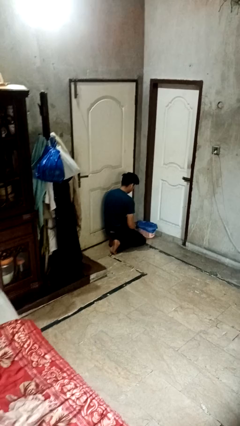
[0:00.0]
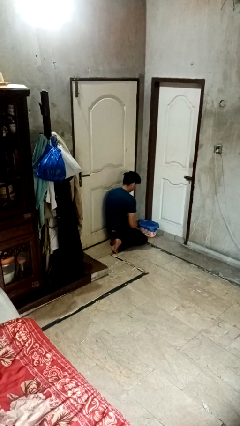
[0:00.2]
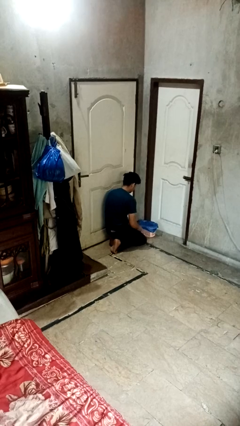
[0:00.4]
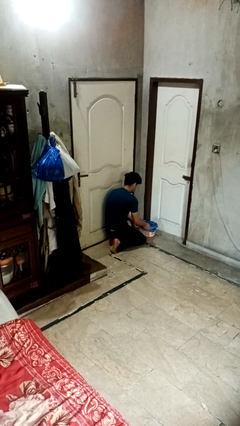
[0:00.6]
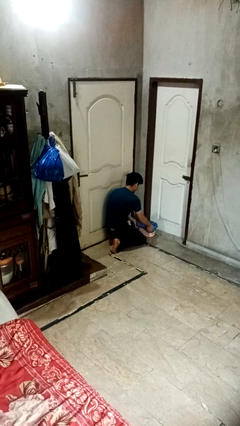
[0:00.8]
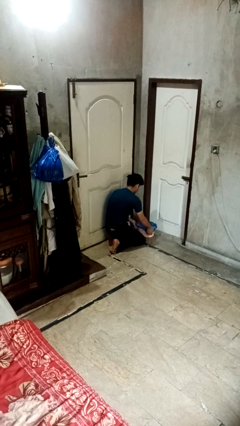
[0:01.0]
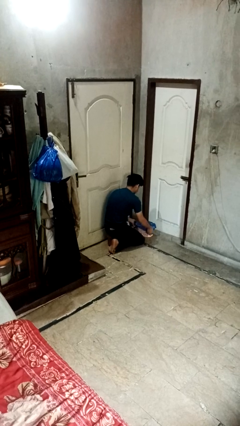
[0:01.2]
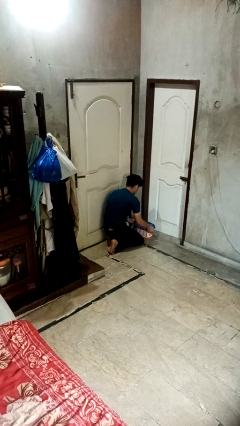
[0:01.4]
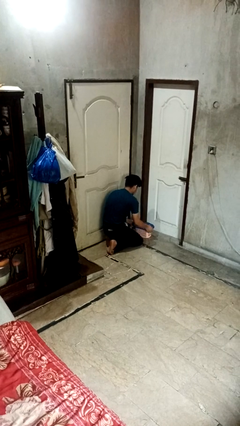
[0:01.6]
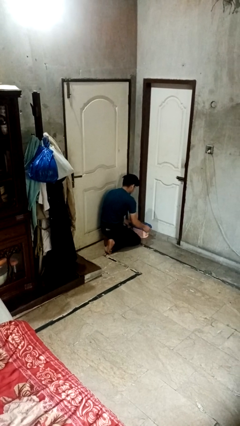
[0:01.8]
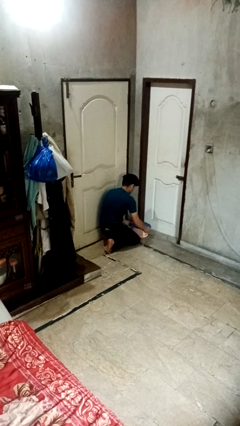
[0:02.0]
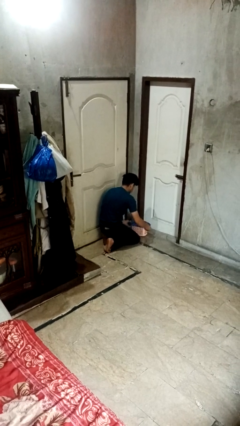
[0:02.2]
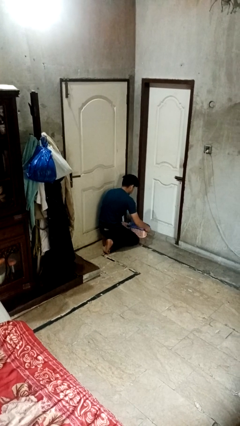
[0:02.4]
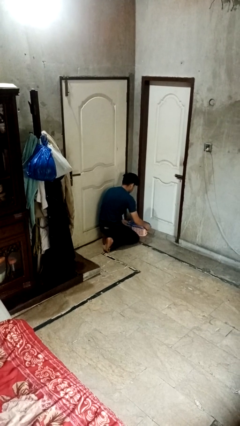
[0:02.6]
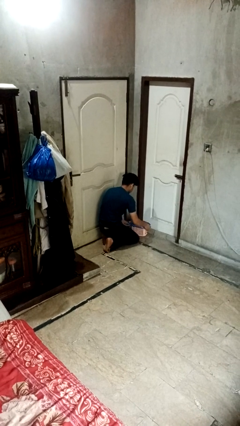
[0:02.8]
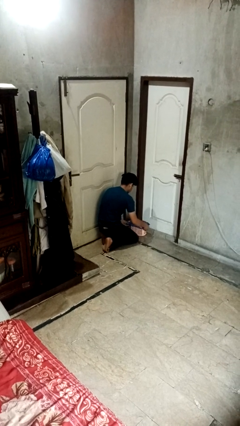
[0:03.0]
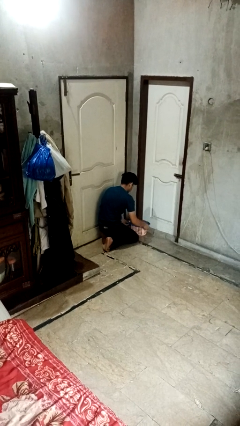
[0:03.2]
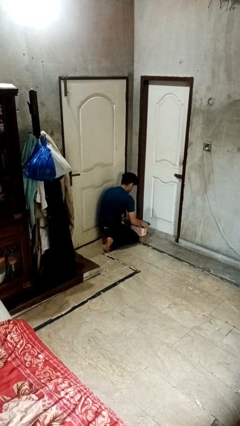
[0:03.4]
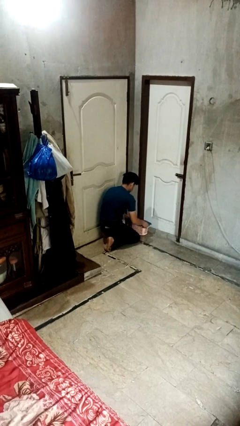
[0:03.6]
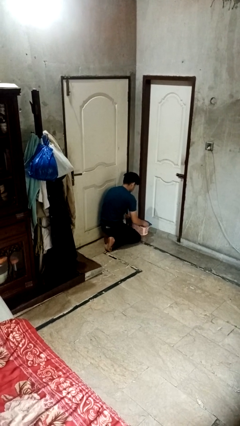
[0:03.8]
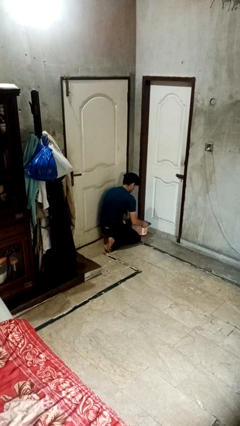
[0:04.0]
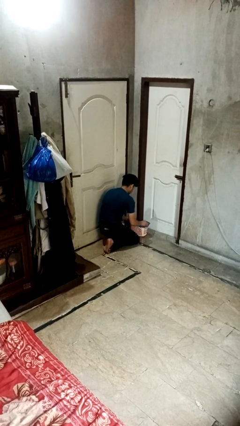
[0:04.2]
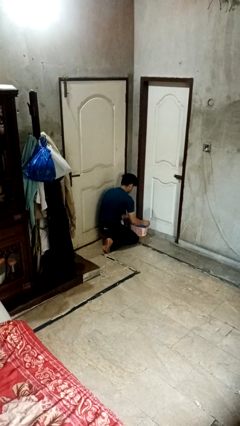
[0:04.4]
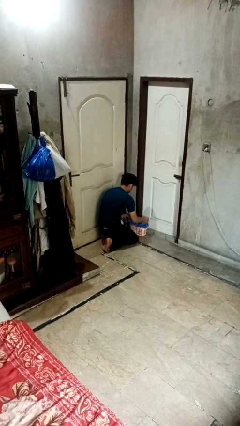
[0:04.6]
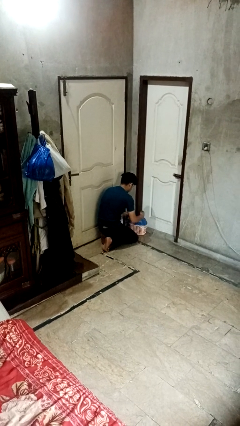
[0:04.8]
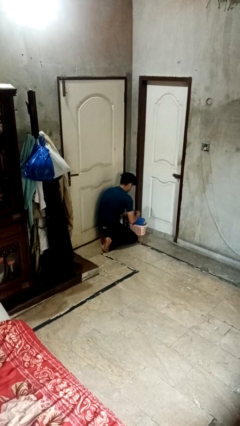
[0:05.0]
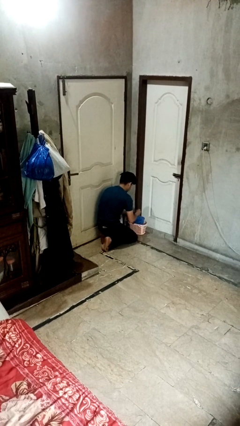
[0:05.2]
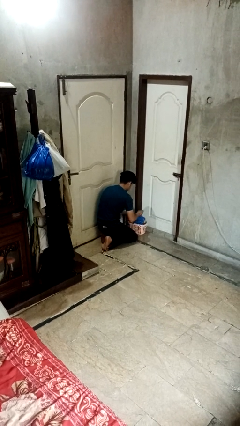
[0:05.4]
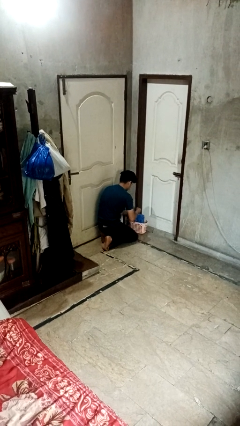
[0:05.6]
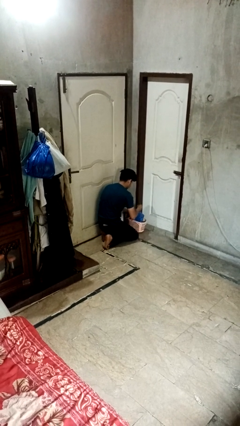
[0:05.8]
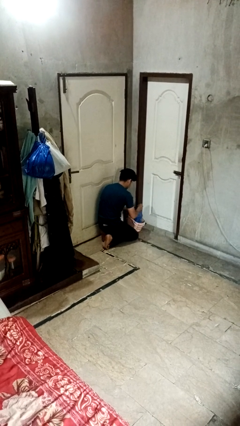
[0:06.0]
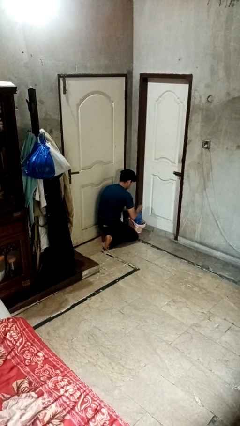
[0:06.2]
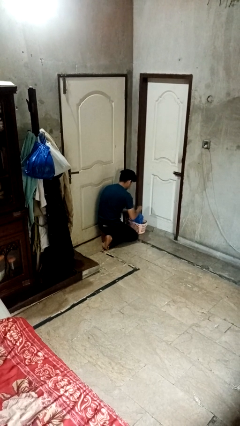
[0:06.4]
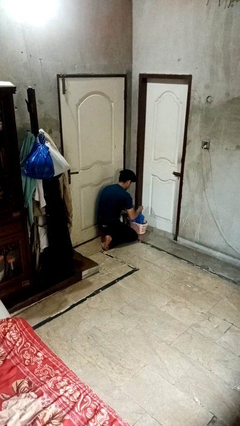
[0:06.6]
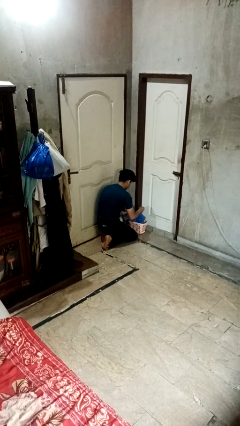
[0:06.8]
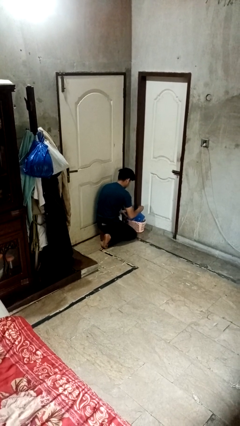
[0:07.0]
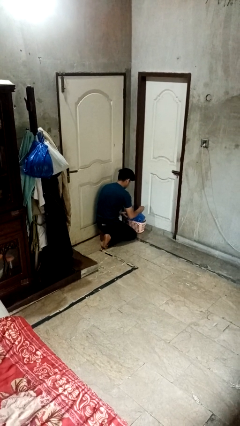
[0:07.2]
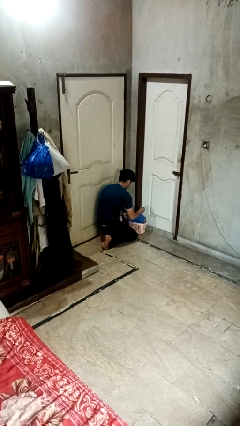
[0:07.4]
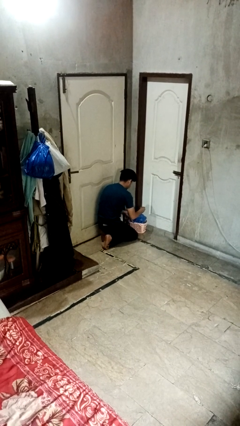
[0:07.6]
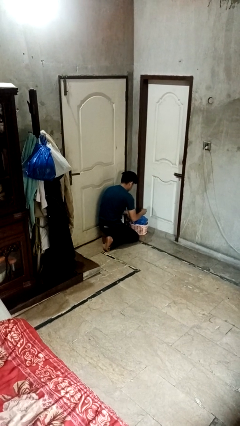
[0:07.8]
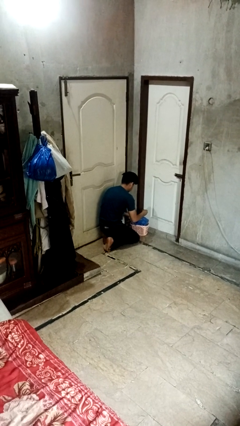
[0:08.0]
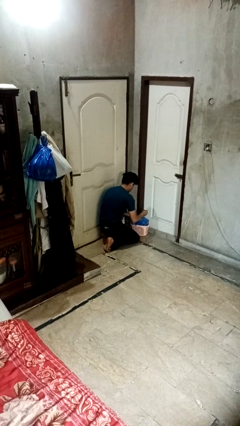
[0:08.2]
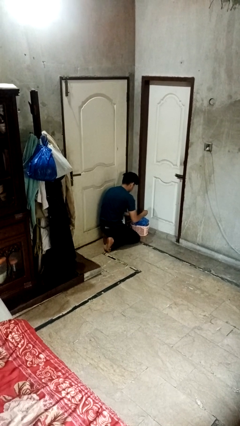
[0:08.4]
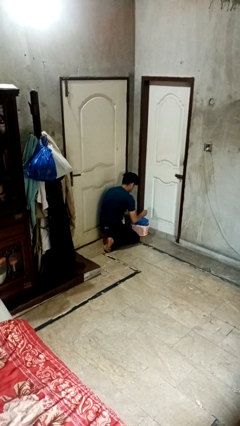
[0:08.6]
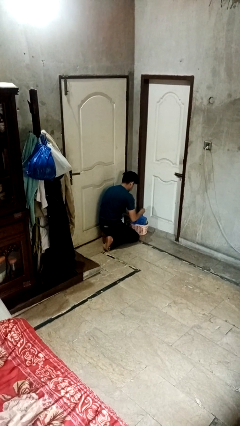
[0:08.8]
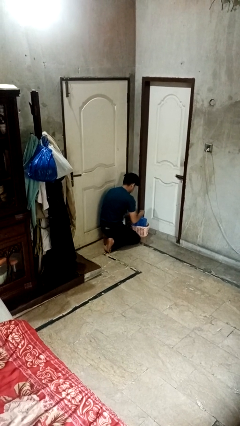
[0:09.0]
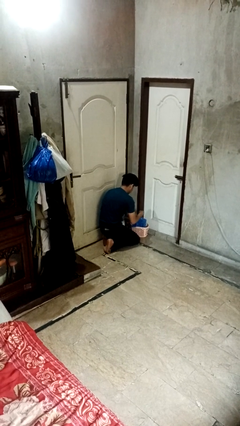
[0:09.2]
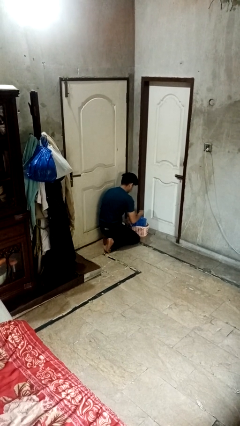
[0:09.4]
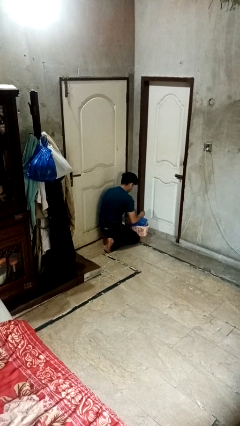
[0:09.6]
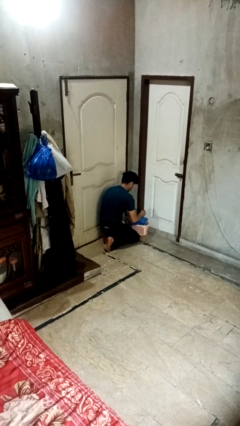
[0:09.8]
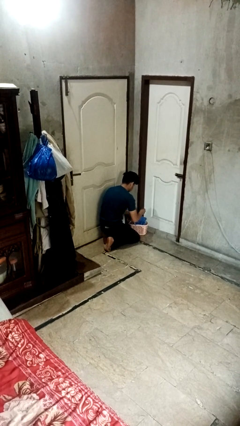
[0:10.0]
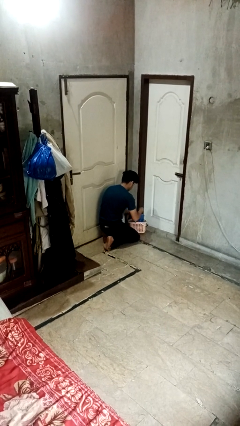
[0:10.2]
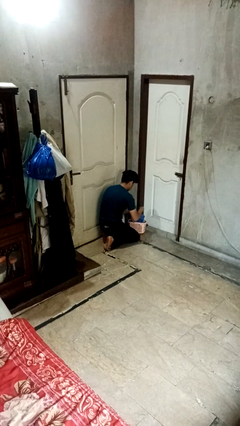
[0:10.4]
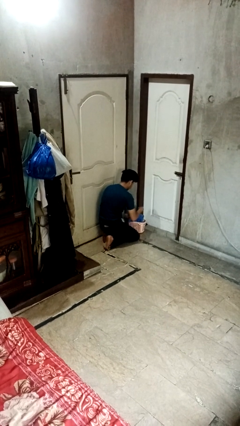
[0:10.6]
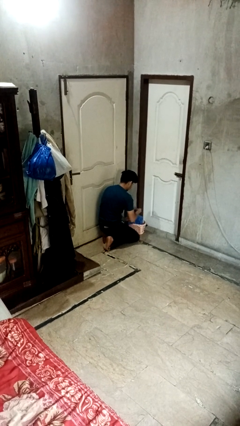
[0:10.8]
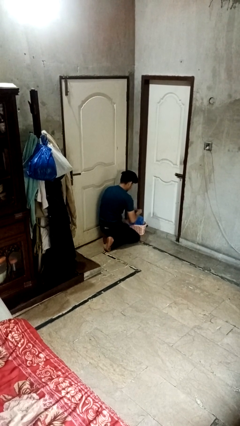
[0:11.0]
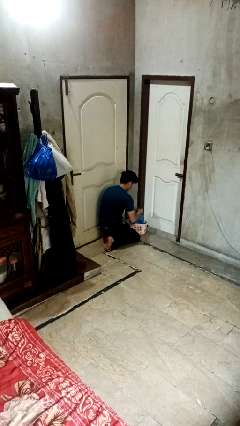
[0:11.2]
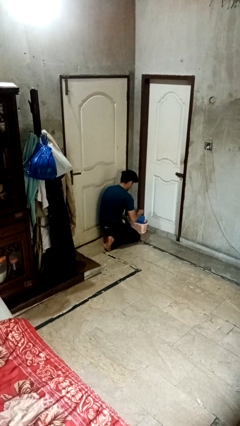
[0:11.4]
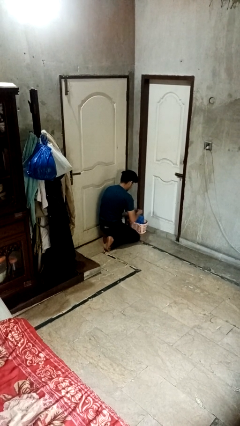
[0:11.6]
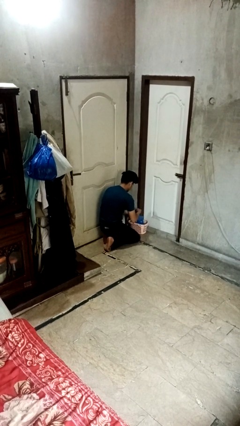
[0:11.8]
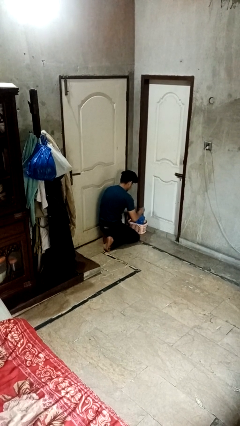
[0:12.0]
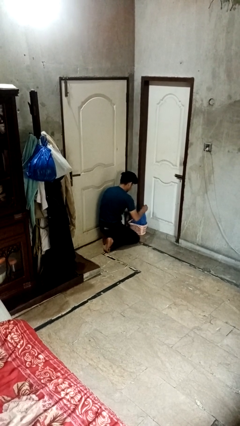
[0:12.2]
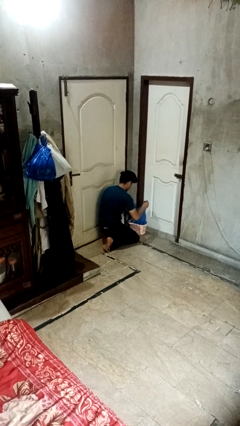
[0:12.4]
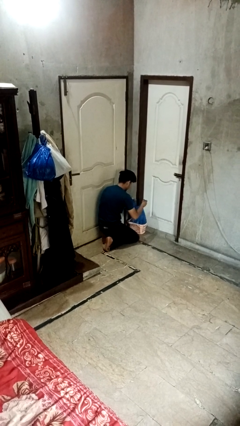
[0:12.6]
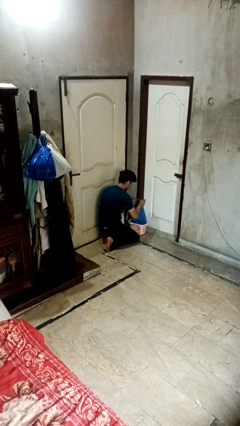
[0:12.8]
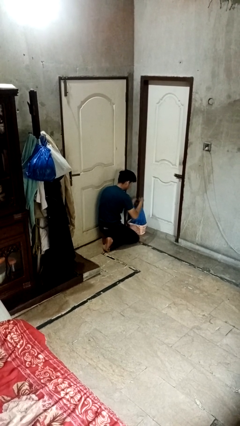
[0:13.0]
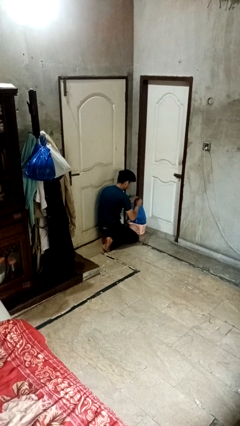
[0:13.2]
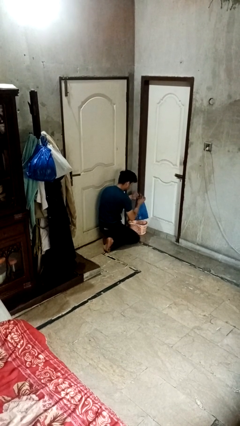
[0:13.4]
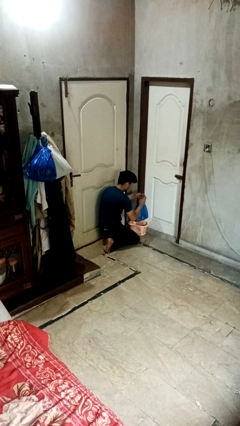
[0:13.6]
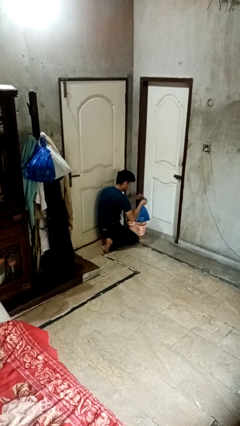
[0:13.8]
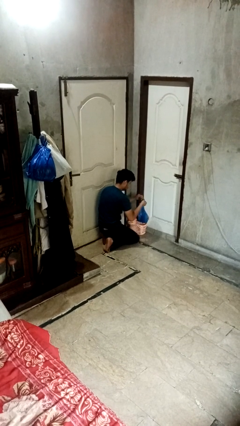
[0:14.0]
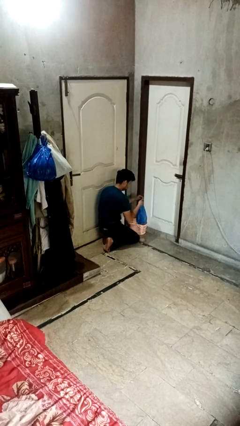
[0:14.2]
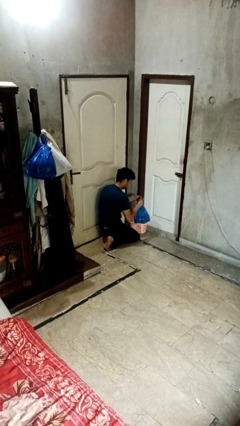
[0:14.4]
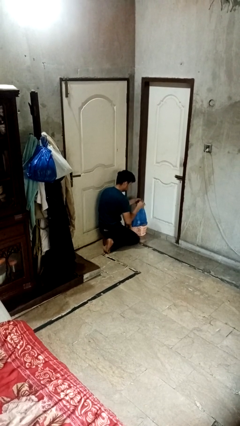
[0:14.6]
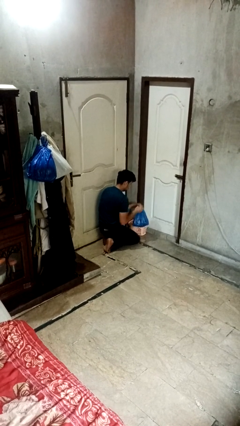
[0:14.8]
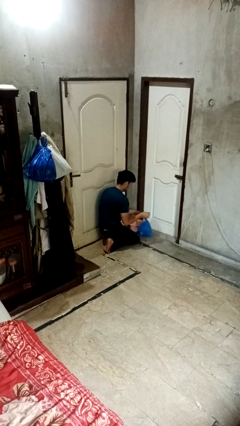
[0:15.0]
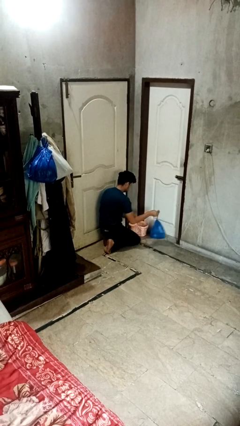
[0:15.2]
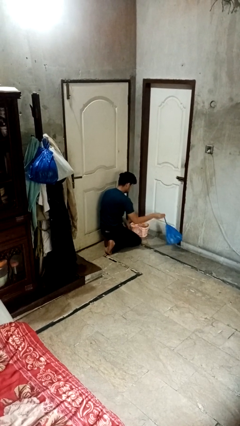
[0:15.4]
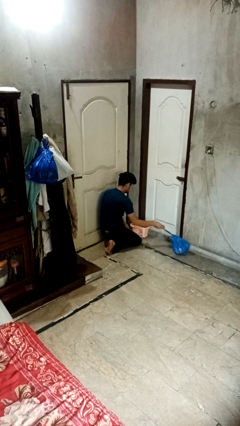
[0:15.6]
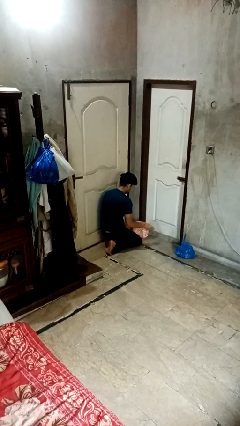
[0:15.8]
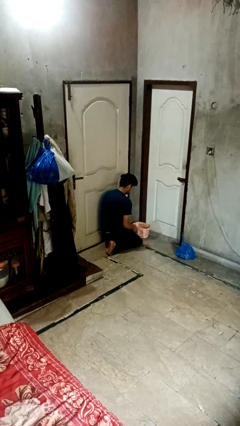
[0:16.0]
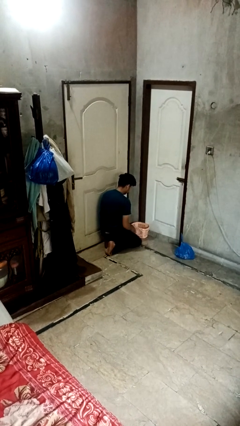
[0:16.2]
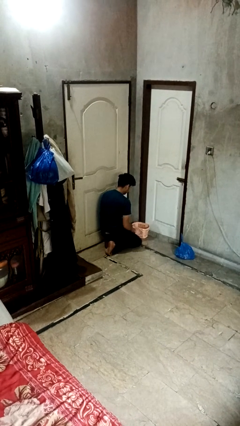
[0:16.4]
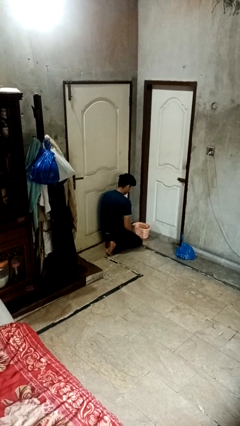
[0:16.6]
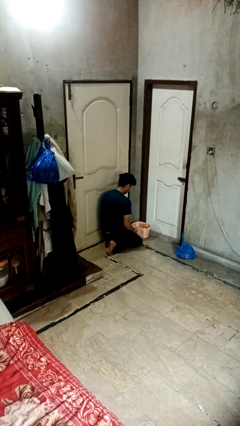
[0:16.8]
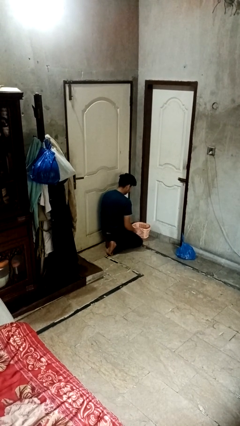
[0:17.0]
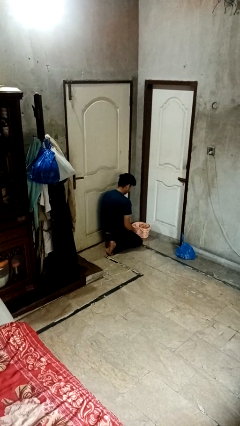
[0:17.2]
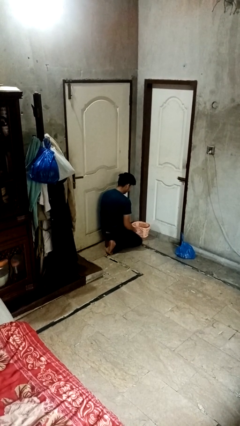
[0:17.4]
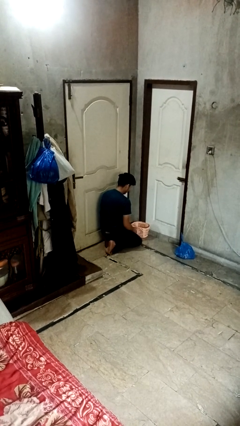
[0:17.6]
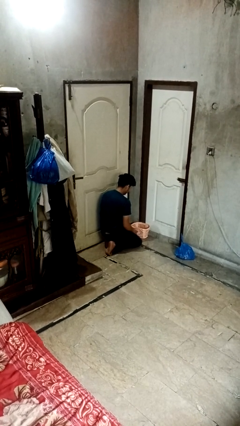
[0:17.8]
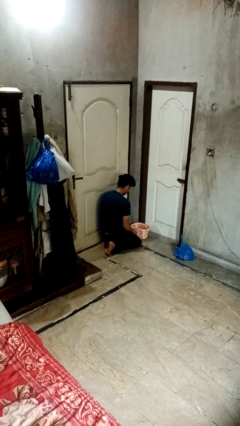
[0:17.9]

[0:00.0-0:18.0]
person removes trashbag from trashcan

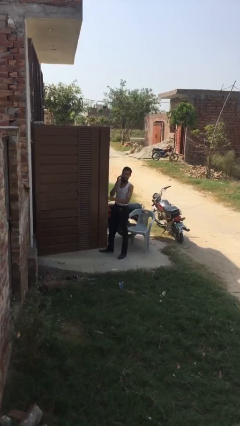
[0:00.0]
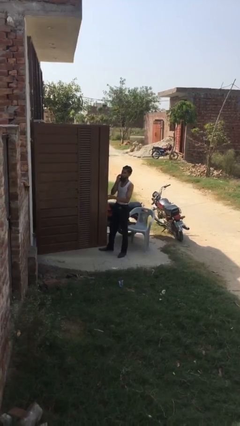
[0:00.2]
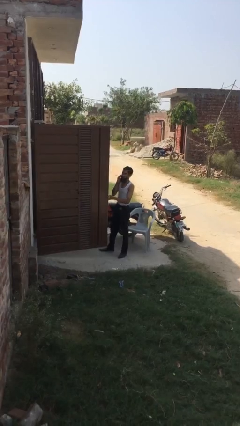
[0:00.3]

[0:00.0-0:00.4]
person closes facility door
